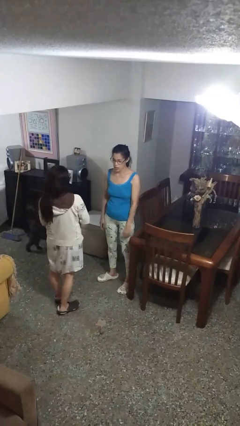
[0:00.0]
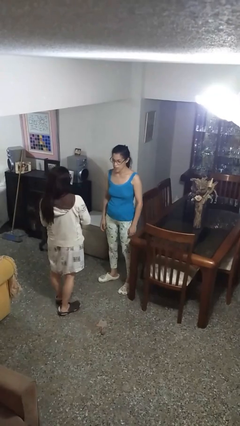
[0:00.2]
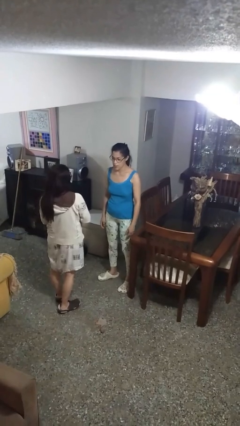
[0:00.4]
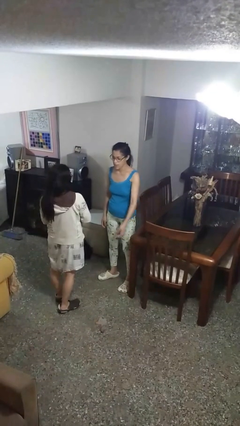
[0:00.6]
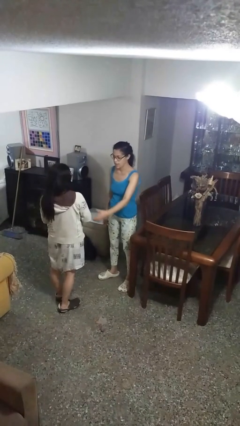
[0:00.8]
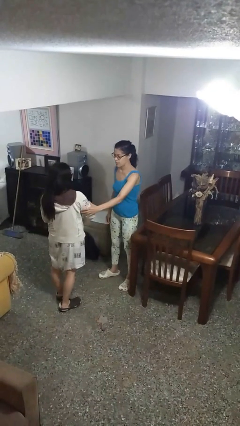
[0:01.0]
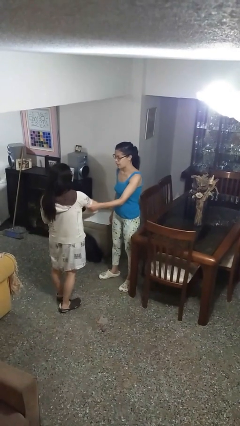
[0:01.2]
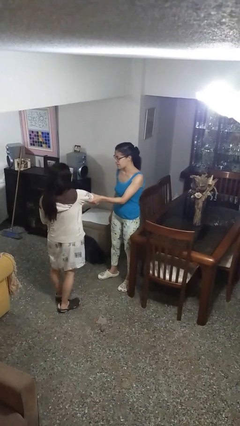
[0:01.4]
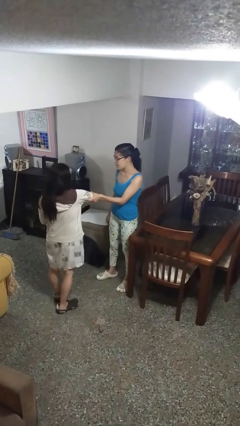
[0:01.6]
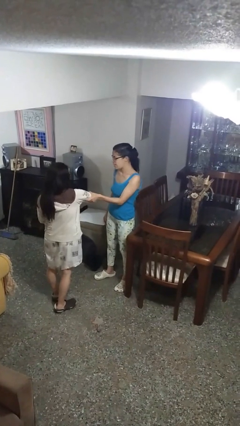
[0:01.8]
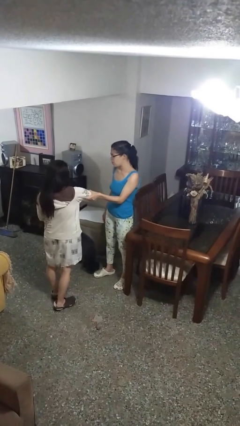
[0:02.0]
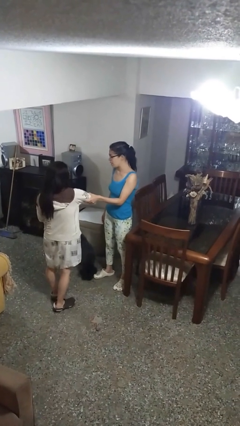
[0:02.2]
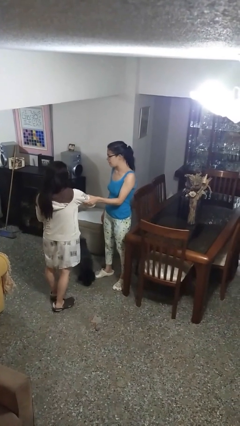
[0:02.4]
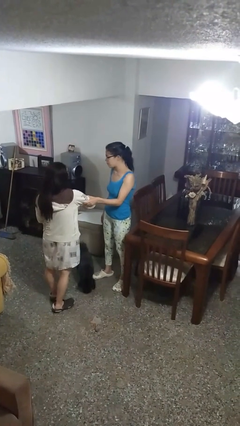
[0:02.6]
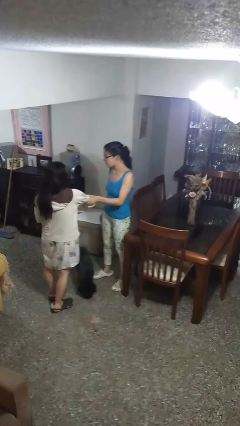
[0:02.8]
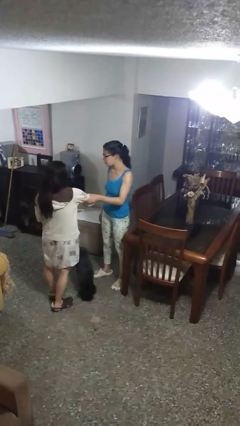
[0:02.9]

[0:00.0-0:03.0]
person grabs person by bicep

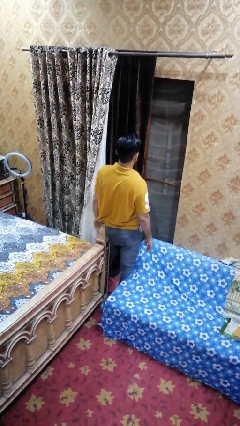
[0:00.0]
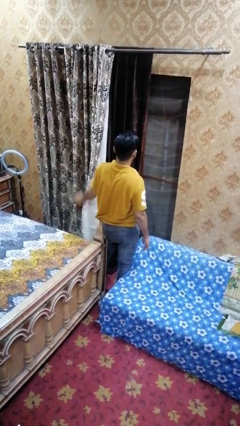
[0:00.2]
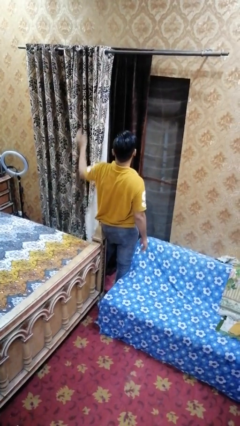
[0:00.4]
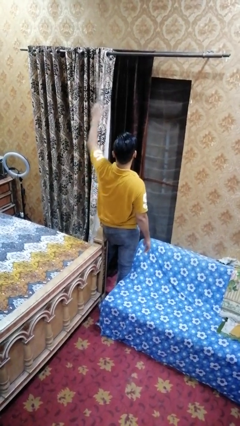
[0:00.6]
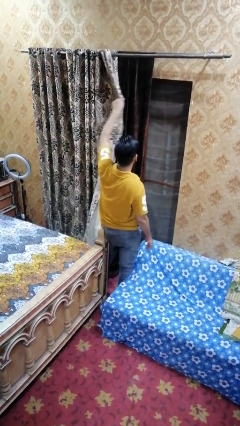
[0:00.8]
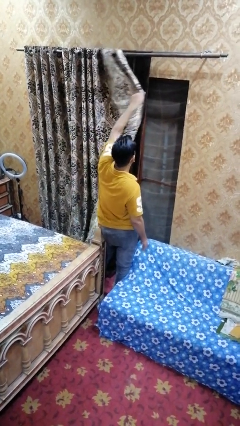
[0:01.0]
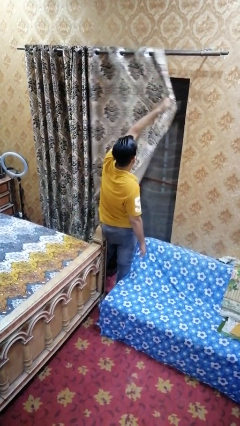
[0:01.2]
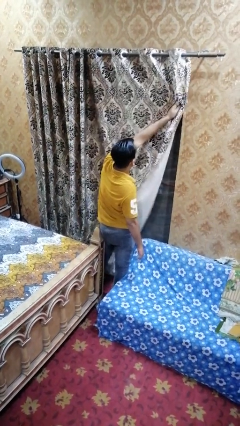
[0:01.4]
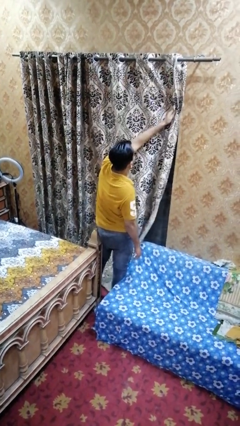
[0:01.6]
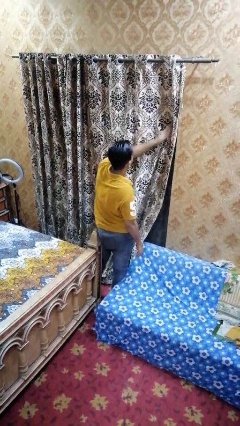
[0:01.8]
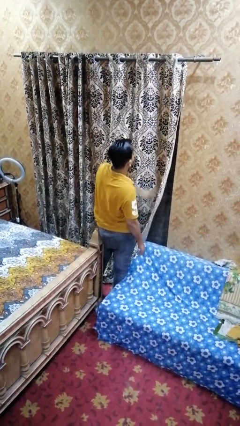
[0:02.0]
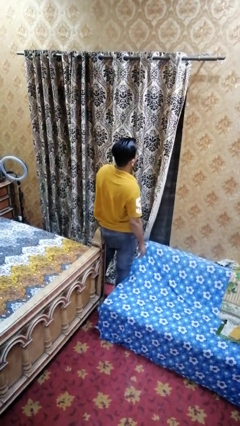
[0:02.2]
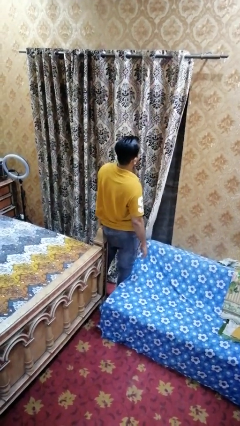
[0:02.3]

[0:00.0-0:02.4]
person closes curtains

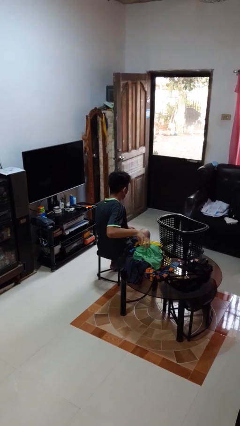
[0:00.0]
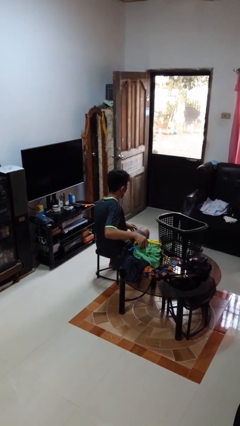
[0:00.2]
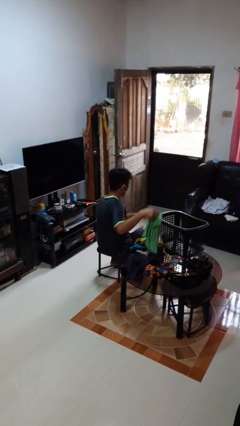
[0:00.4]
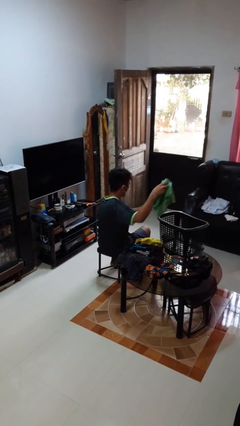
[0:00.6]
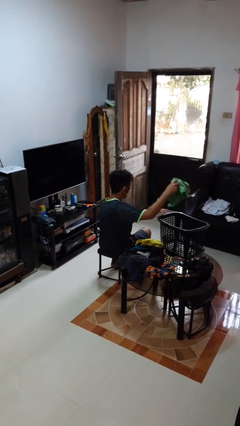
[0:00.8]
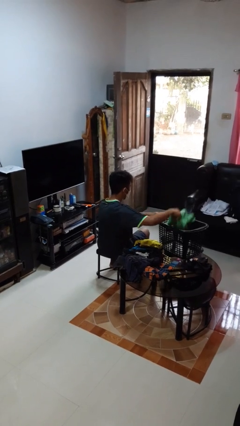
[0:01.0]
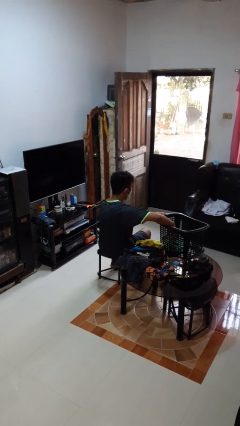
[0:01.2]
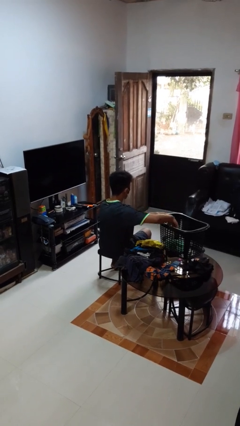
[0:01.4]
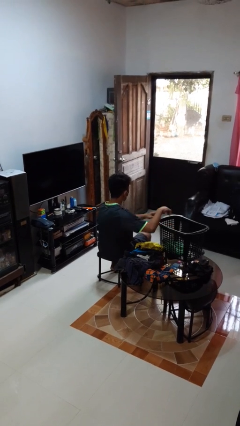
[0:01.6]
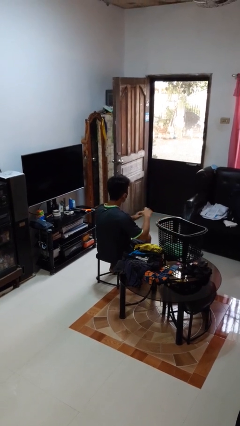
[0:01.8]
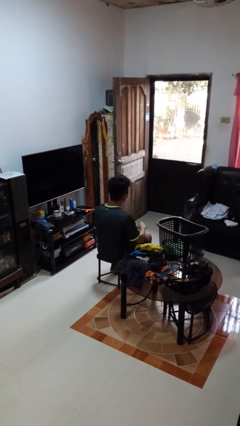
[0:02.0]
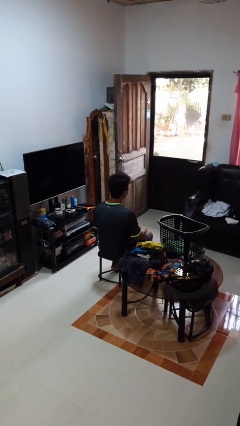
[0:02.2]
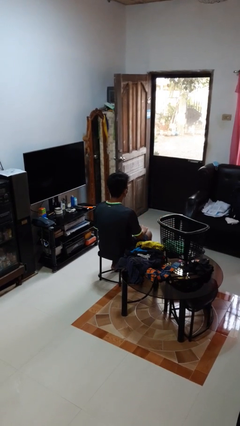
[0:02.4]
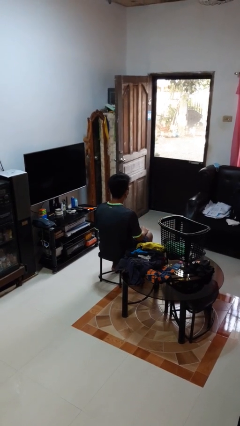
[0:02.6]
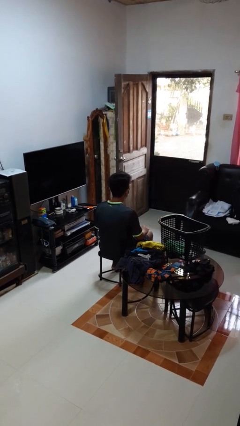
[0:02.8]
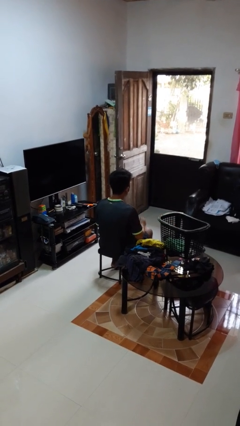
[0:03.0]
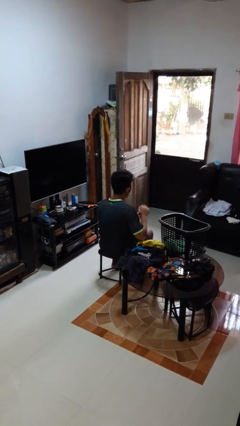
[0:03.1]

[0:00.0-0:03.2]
person puts object into basket

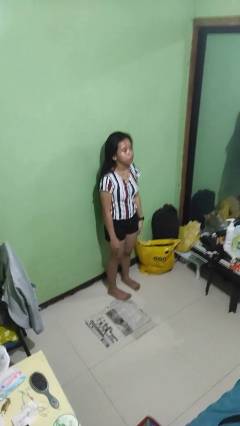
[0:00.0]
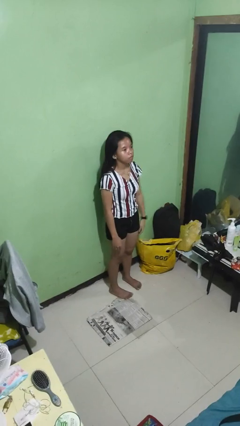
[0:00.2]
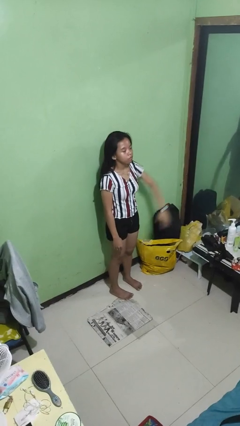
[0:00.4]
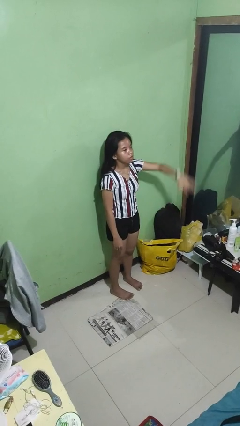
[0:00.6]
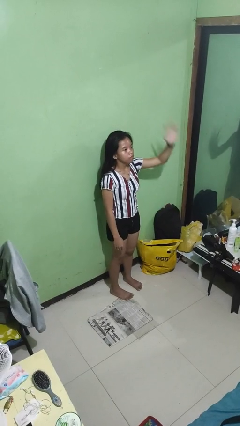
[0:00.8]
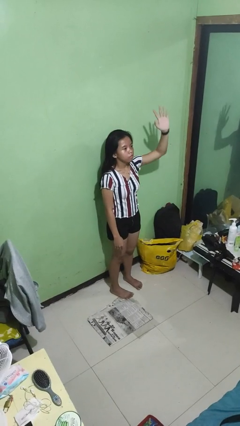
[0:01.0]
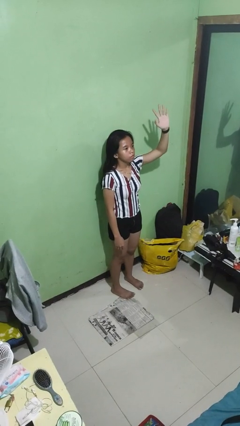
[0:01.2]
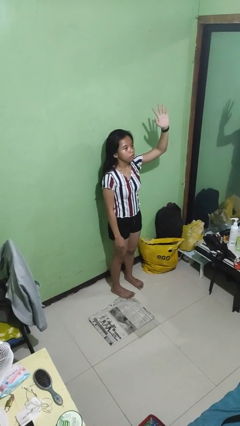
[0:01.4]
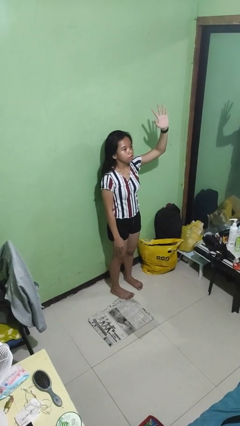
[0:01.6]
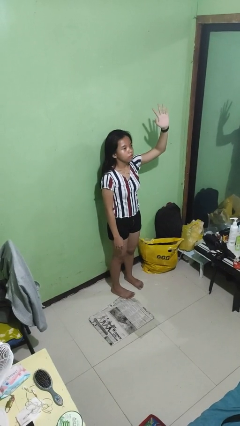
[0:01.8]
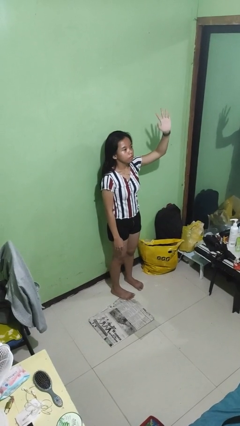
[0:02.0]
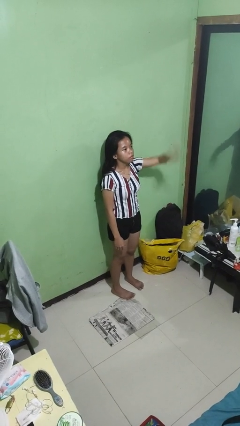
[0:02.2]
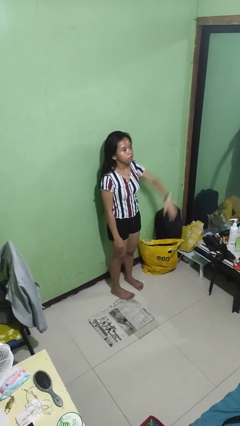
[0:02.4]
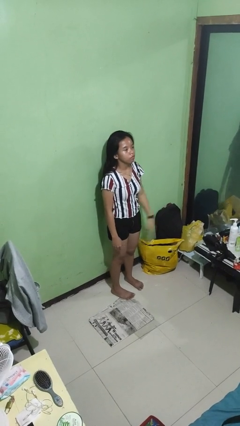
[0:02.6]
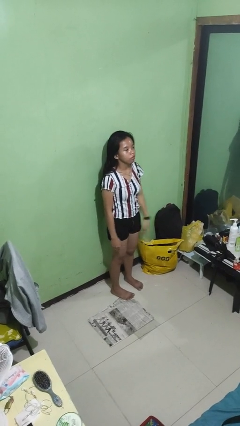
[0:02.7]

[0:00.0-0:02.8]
person gestures number five

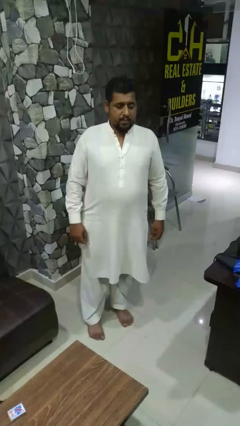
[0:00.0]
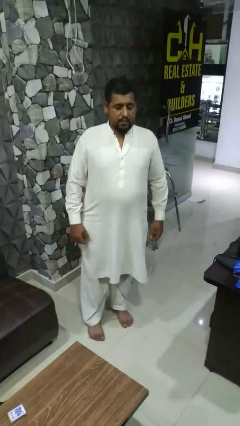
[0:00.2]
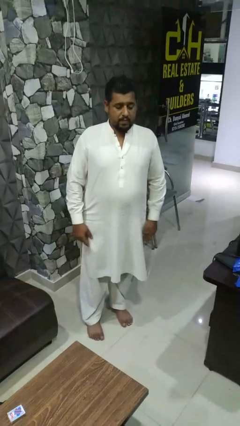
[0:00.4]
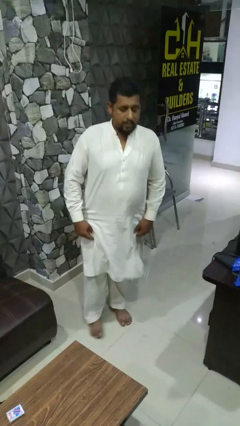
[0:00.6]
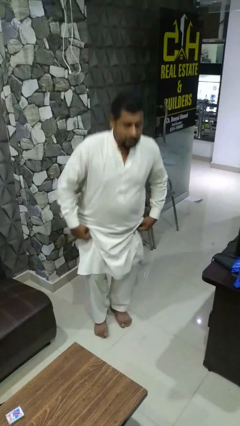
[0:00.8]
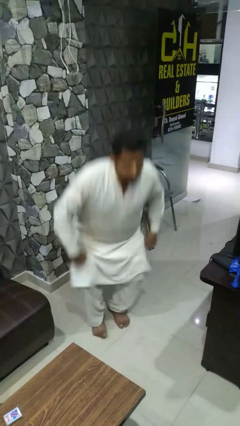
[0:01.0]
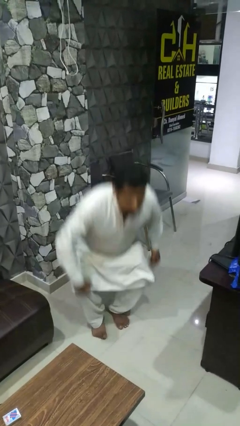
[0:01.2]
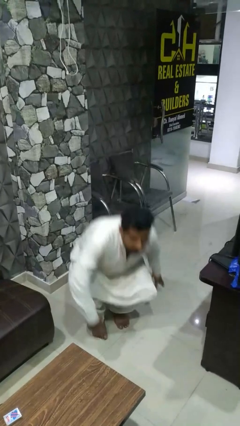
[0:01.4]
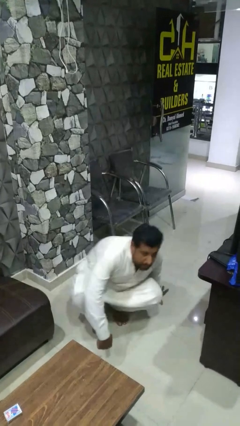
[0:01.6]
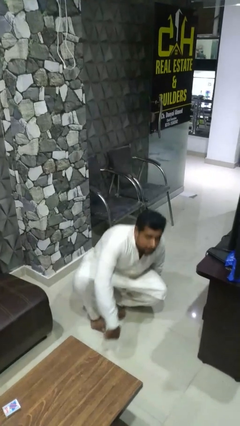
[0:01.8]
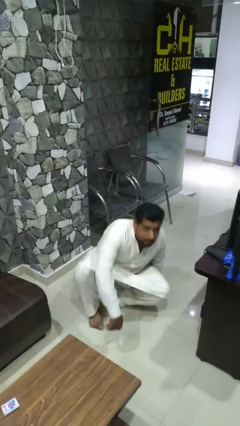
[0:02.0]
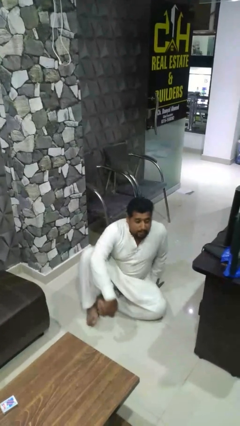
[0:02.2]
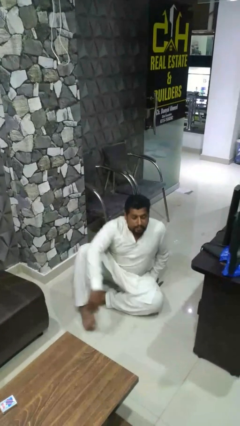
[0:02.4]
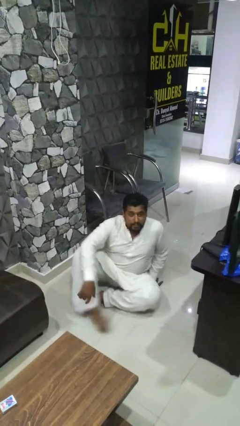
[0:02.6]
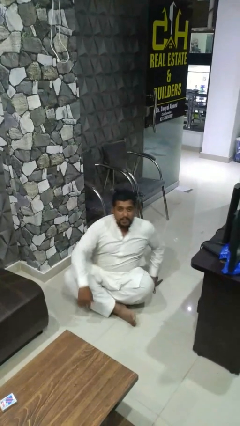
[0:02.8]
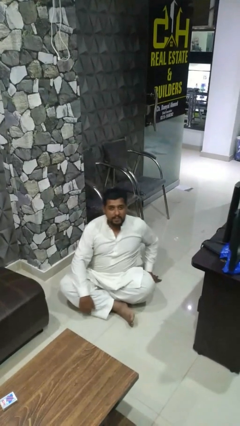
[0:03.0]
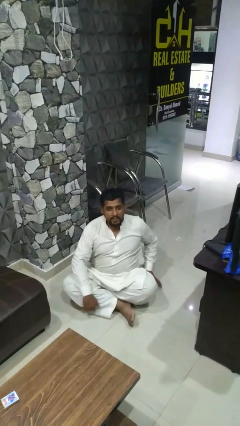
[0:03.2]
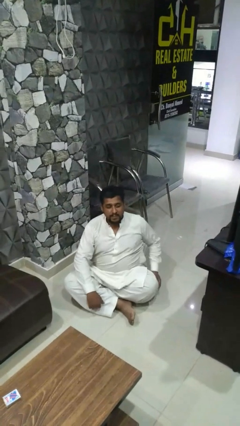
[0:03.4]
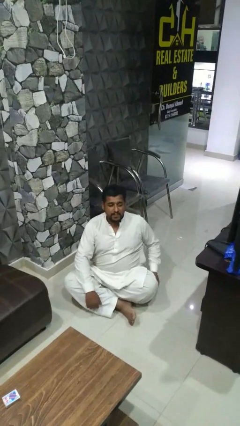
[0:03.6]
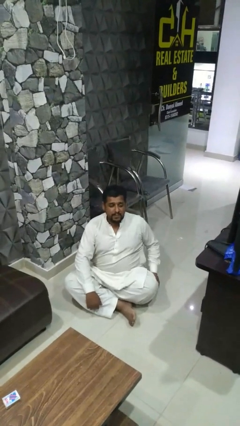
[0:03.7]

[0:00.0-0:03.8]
person sits crisscross

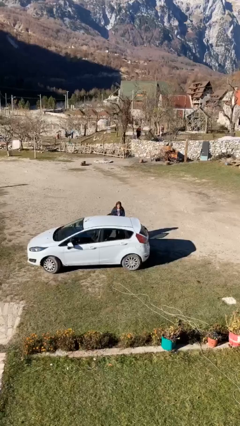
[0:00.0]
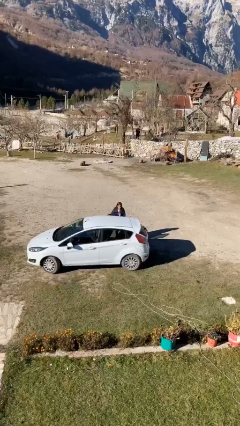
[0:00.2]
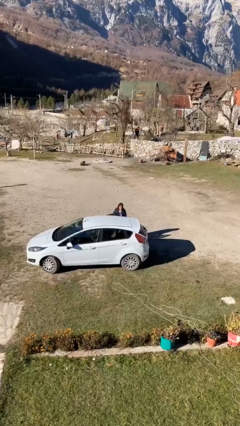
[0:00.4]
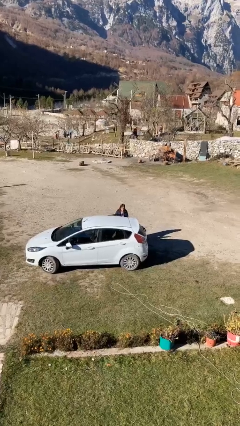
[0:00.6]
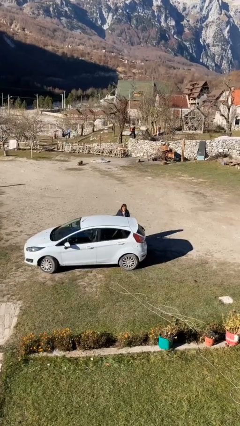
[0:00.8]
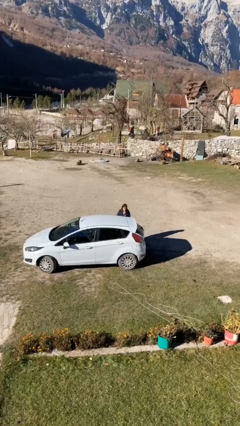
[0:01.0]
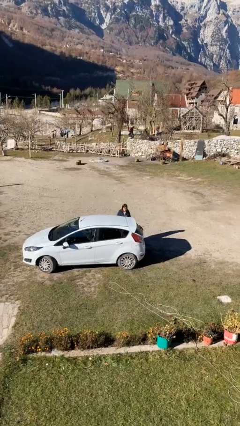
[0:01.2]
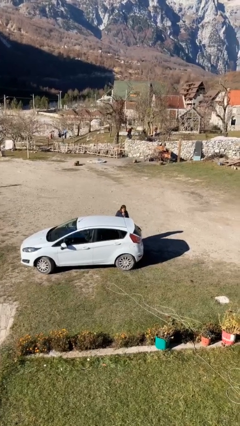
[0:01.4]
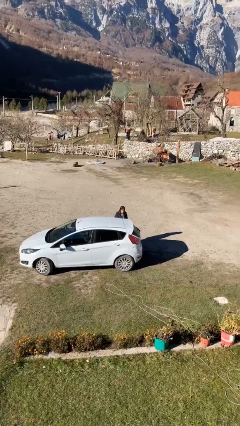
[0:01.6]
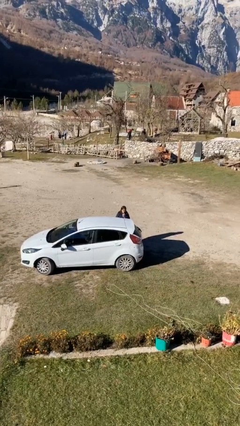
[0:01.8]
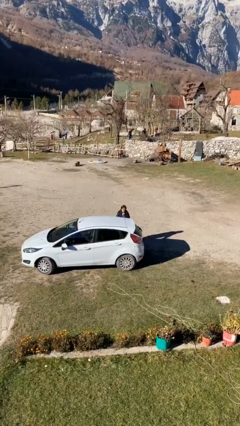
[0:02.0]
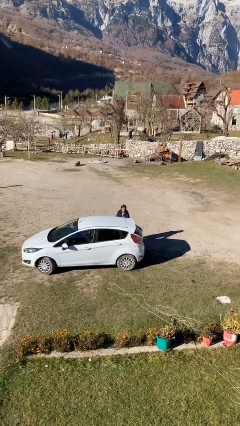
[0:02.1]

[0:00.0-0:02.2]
person closes car door

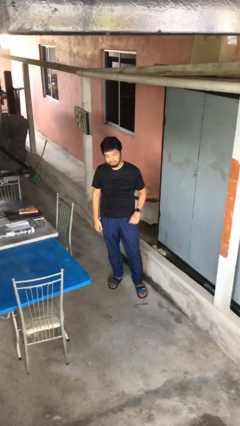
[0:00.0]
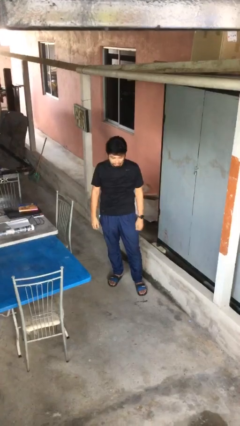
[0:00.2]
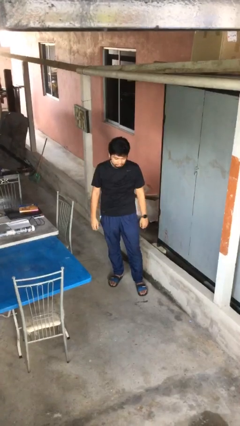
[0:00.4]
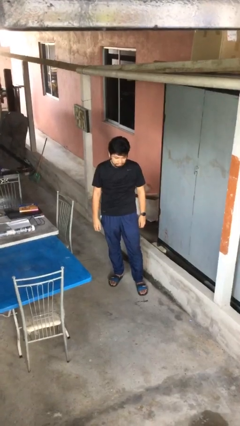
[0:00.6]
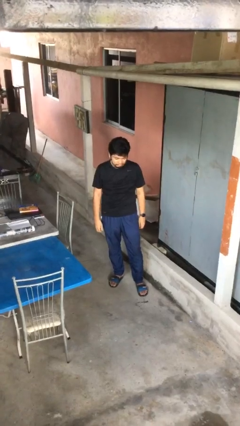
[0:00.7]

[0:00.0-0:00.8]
person gestures lower hand
